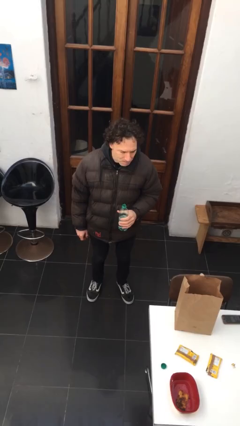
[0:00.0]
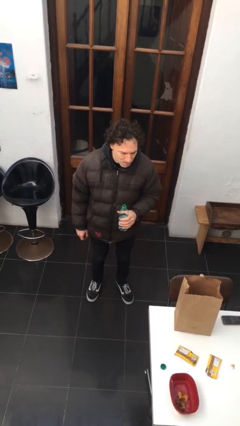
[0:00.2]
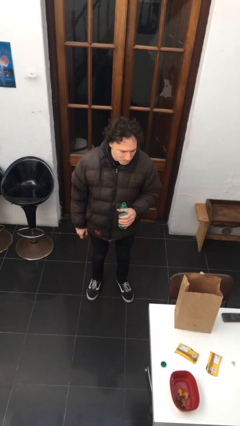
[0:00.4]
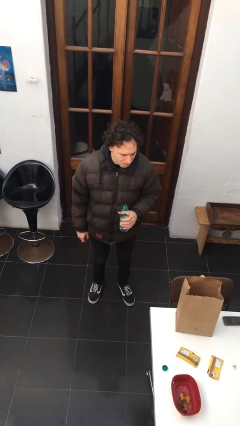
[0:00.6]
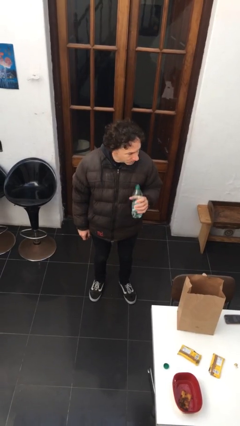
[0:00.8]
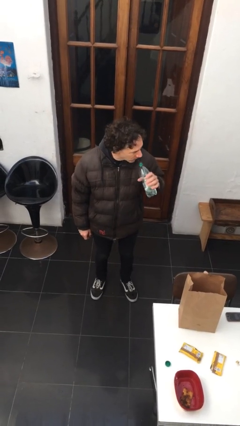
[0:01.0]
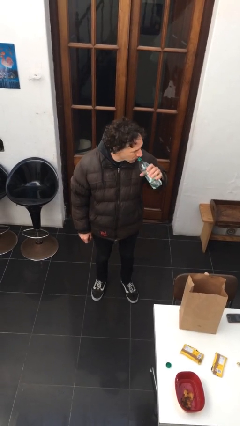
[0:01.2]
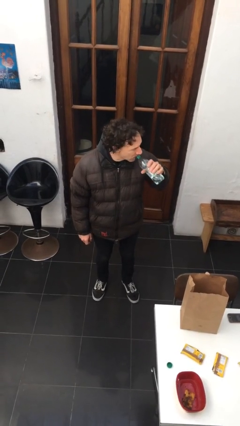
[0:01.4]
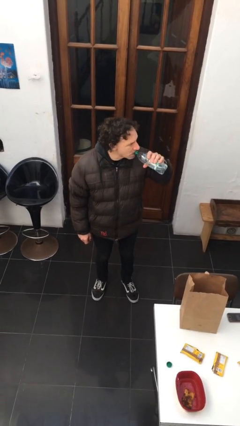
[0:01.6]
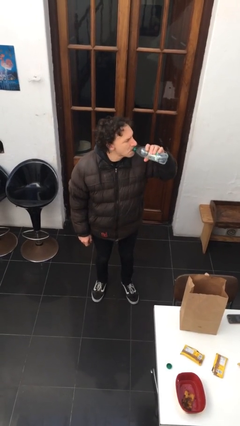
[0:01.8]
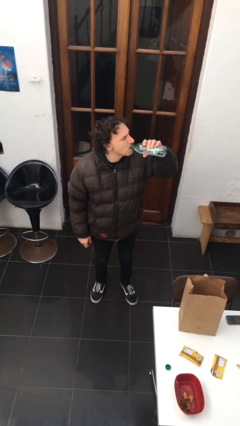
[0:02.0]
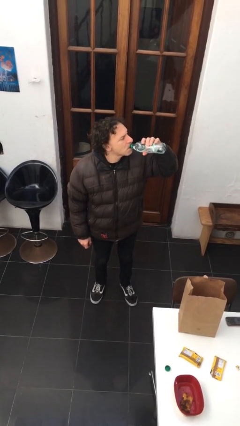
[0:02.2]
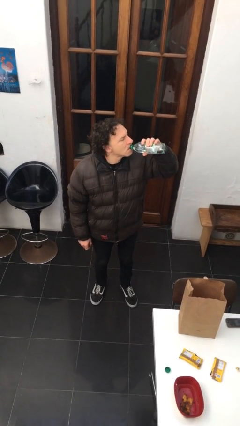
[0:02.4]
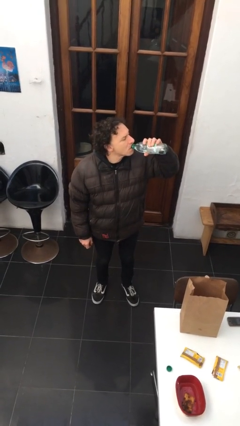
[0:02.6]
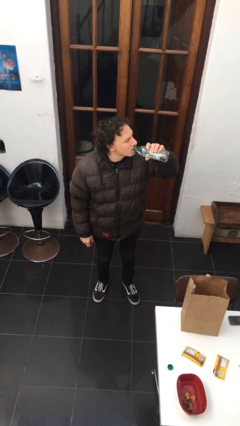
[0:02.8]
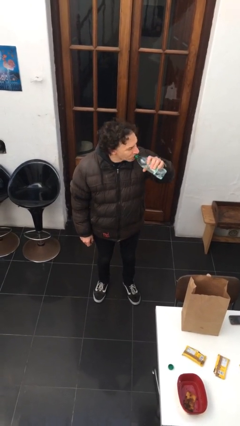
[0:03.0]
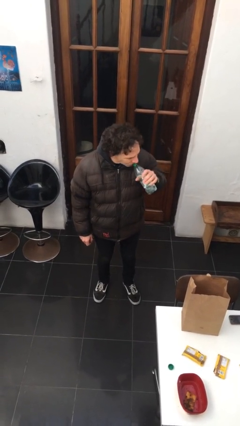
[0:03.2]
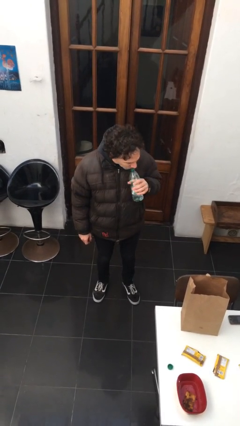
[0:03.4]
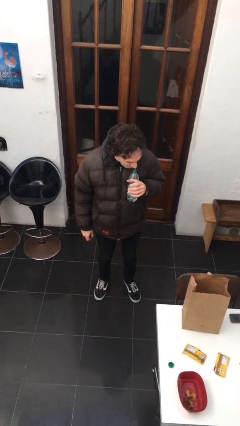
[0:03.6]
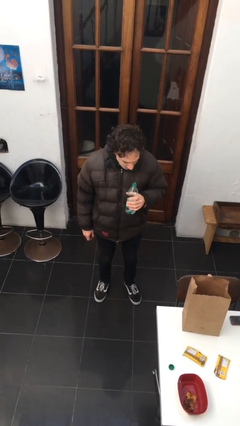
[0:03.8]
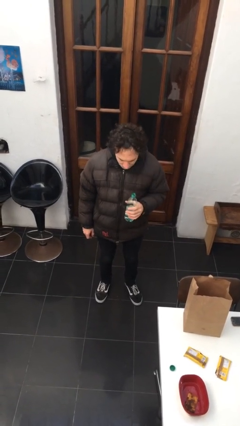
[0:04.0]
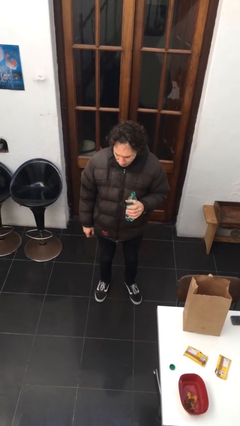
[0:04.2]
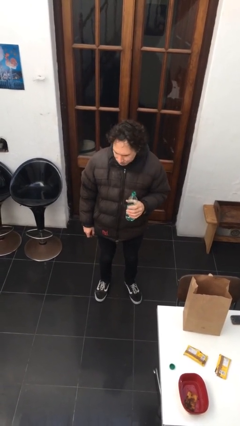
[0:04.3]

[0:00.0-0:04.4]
person drinks from bottle

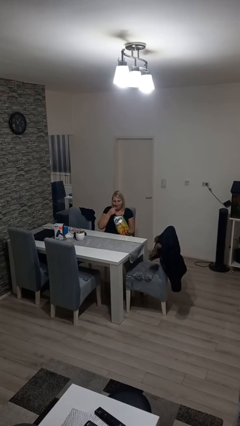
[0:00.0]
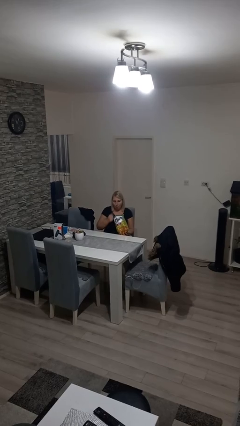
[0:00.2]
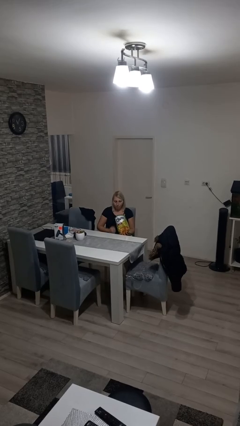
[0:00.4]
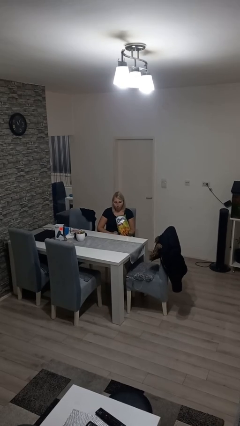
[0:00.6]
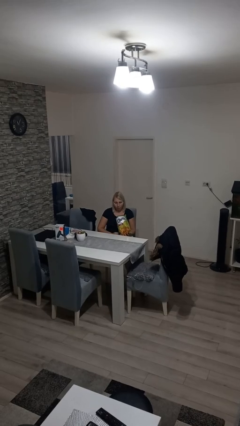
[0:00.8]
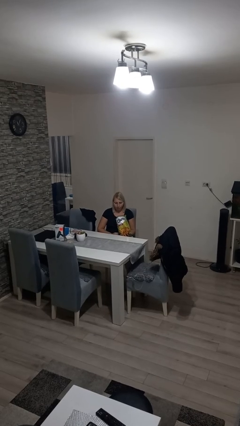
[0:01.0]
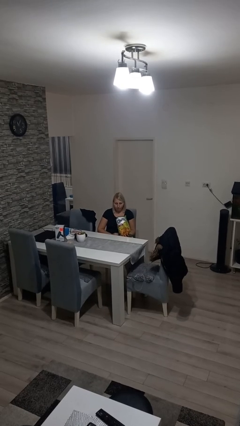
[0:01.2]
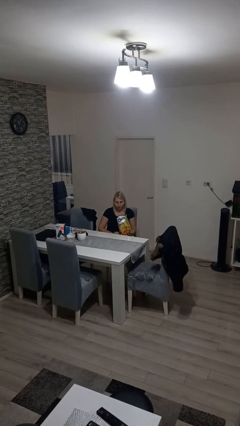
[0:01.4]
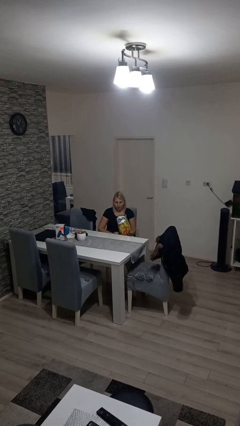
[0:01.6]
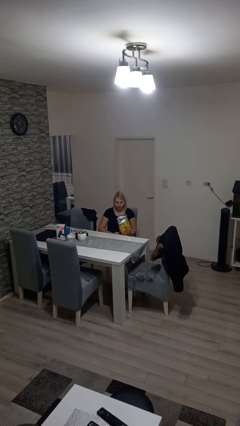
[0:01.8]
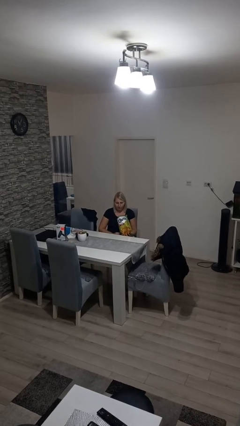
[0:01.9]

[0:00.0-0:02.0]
person eats snack from bag

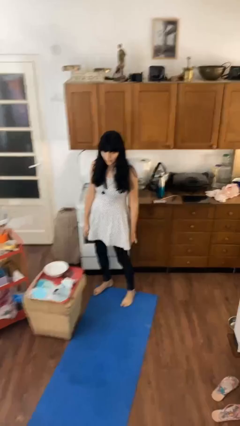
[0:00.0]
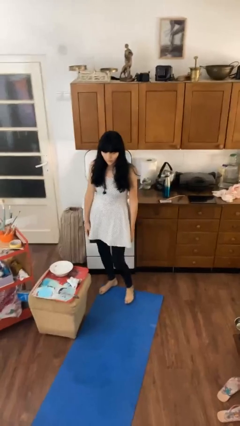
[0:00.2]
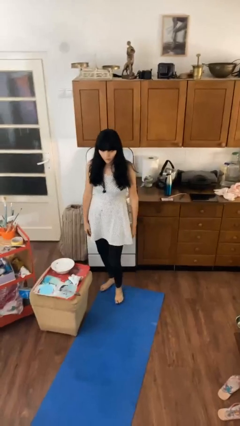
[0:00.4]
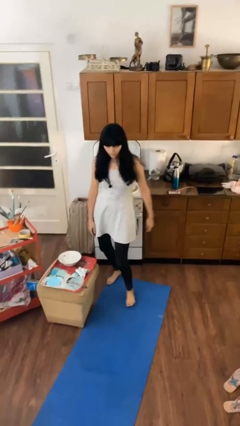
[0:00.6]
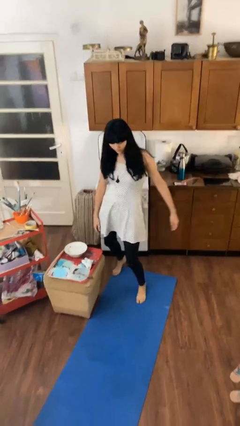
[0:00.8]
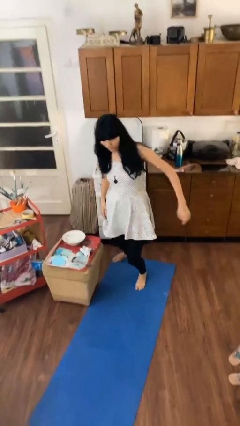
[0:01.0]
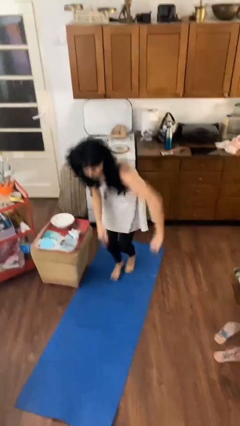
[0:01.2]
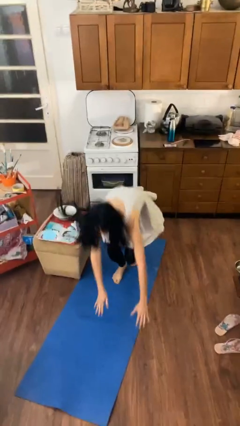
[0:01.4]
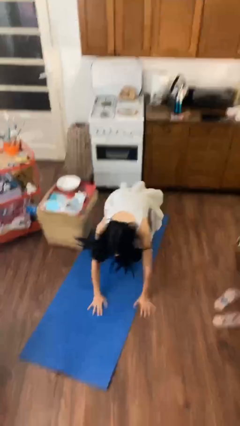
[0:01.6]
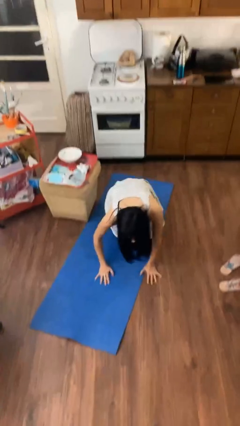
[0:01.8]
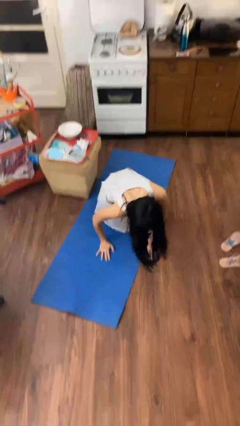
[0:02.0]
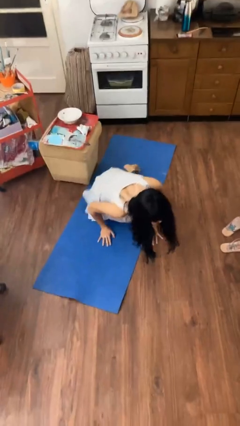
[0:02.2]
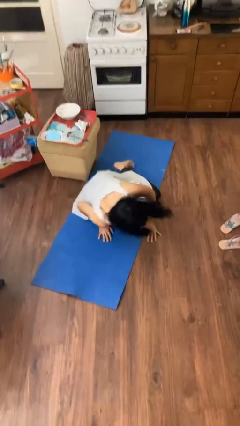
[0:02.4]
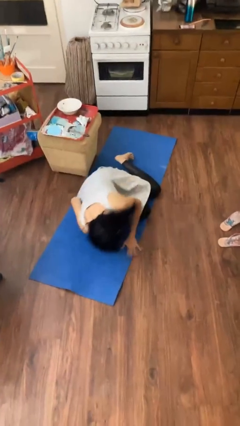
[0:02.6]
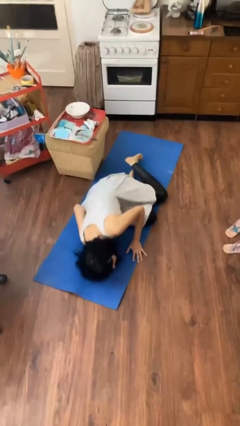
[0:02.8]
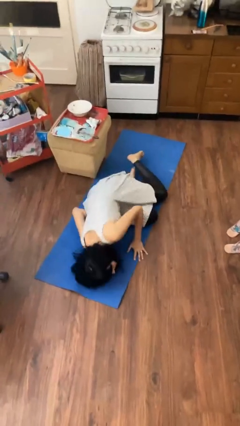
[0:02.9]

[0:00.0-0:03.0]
person trips on object on floor

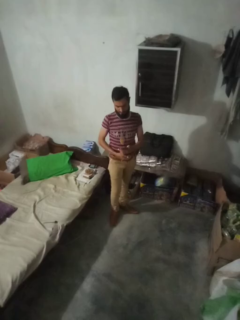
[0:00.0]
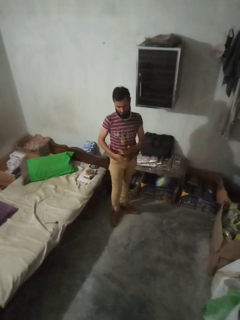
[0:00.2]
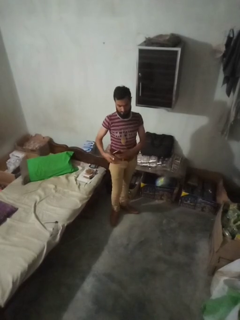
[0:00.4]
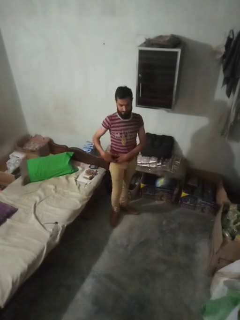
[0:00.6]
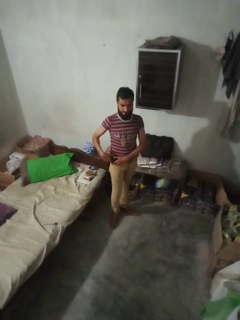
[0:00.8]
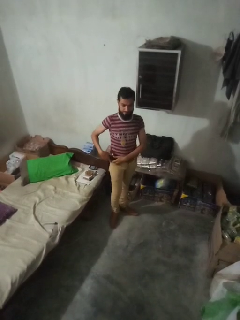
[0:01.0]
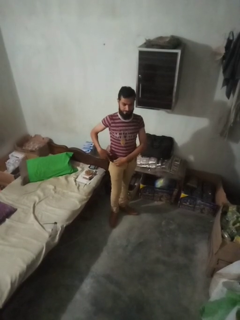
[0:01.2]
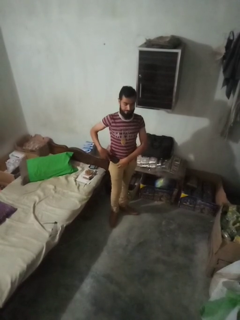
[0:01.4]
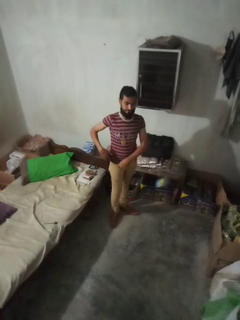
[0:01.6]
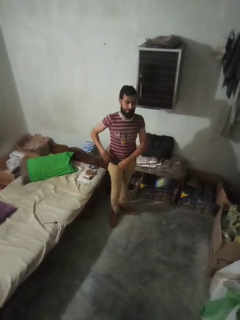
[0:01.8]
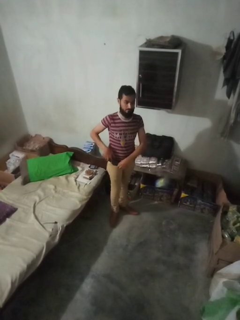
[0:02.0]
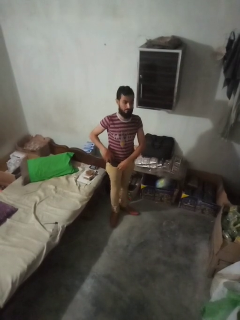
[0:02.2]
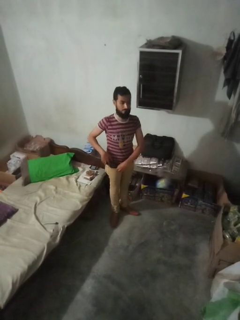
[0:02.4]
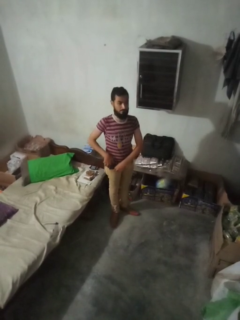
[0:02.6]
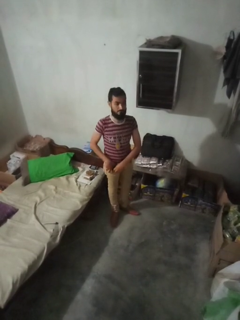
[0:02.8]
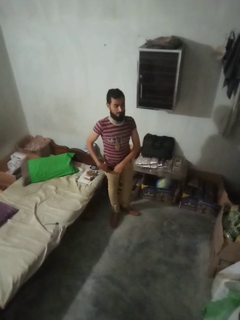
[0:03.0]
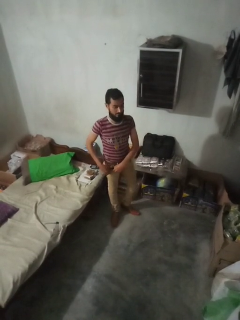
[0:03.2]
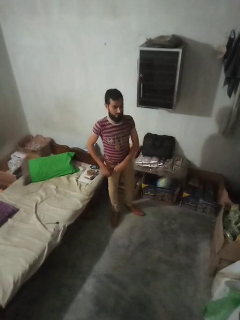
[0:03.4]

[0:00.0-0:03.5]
person puts phone into pocket

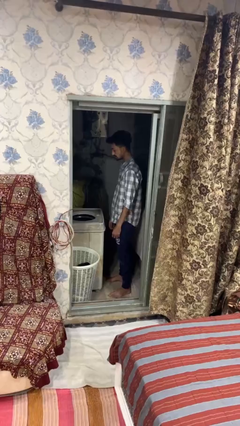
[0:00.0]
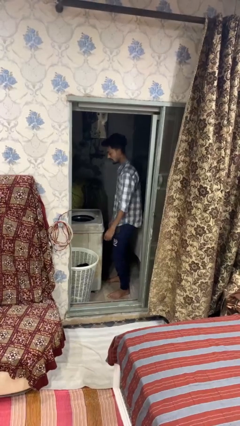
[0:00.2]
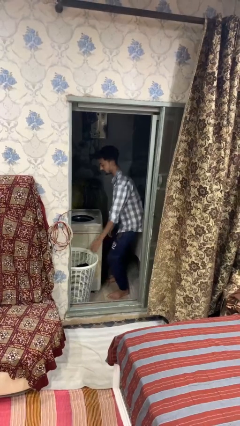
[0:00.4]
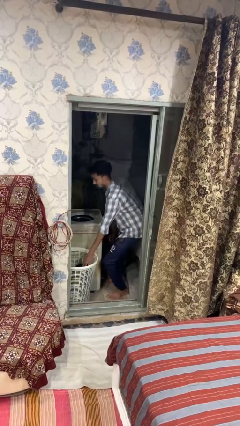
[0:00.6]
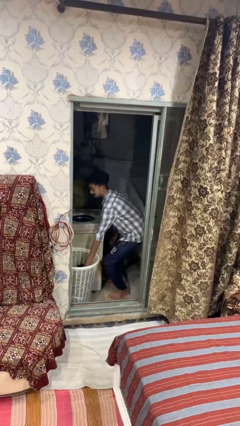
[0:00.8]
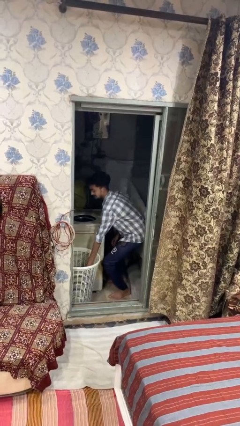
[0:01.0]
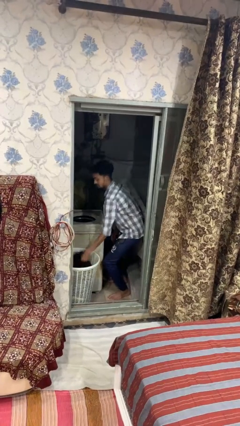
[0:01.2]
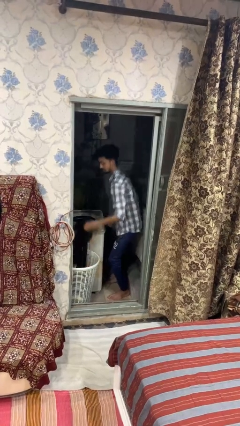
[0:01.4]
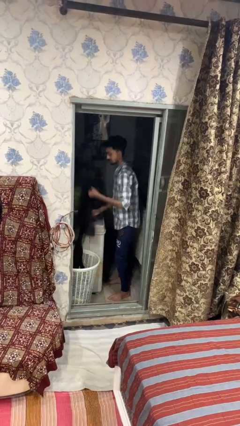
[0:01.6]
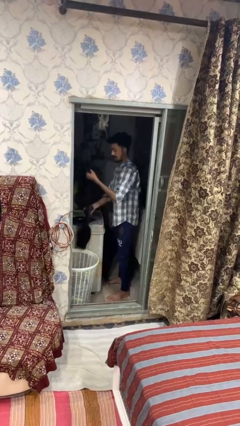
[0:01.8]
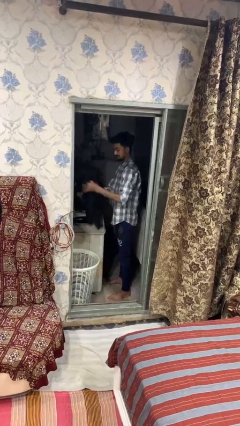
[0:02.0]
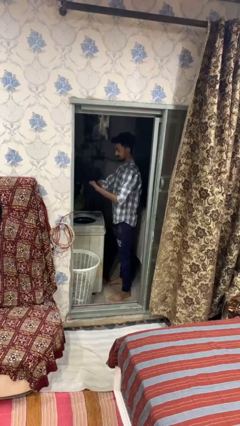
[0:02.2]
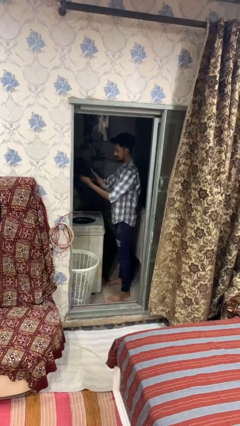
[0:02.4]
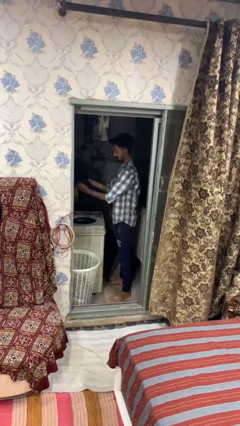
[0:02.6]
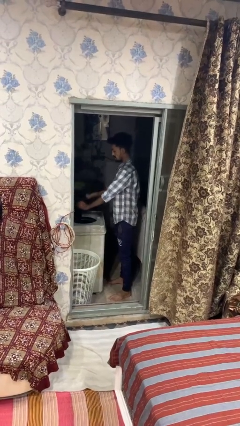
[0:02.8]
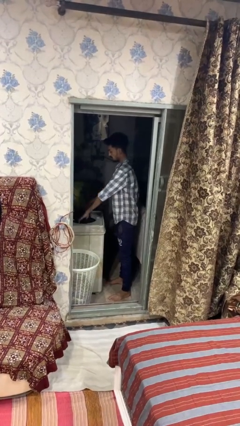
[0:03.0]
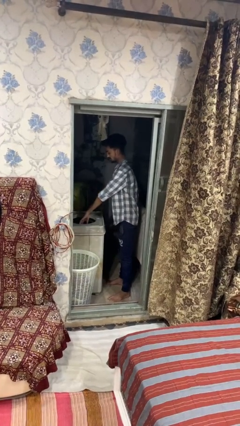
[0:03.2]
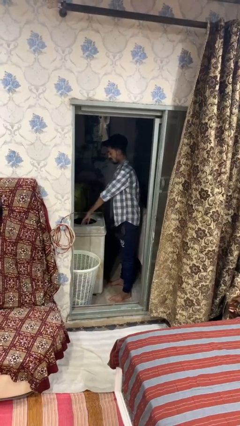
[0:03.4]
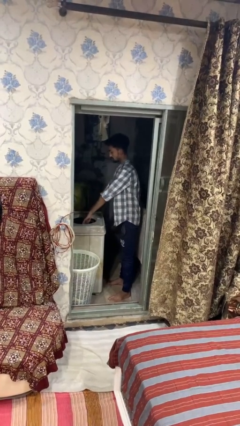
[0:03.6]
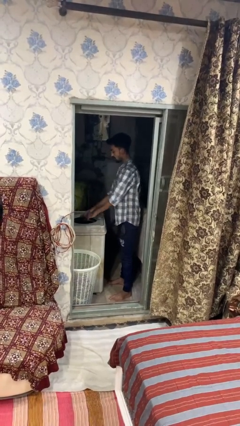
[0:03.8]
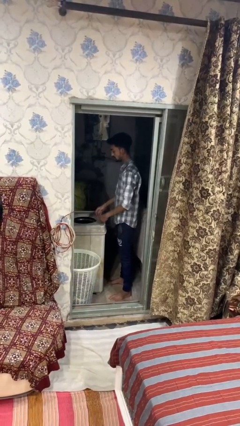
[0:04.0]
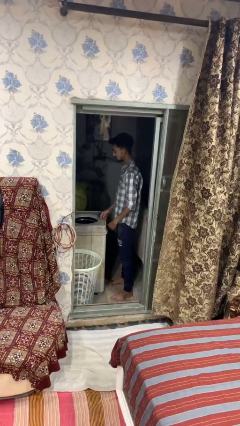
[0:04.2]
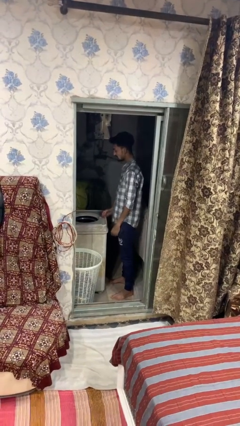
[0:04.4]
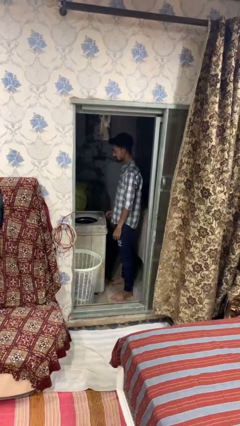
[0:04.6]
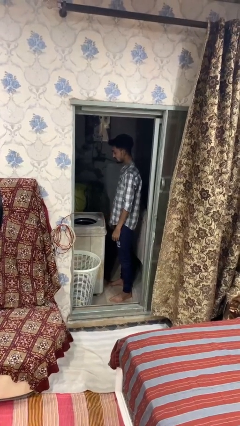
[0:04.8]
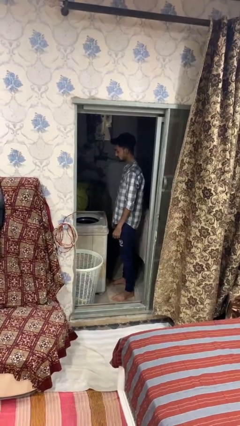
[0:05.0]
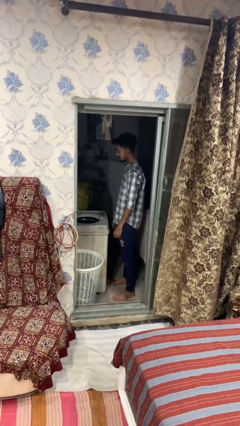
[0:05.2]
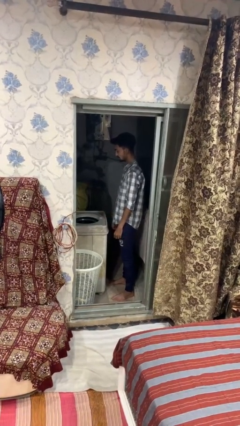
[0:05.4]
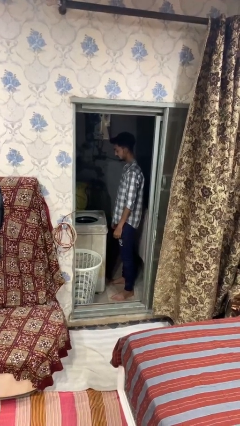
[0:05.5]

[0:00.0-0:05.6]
person loads dryer
